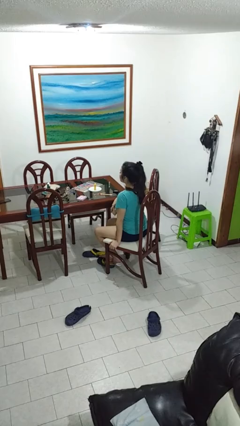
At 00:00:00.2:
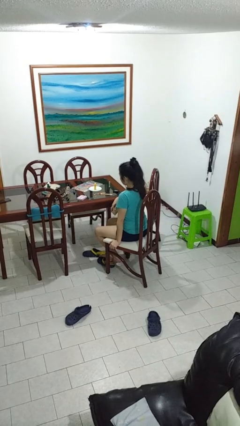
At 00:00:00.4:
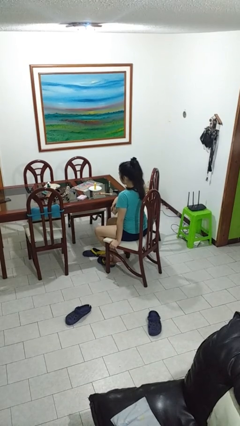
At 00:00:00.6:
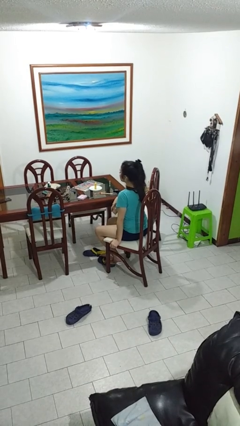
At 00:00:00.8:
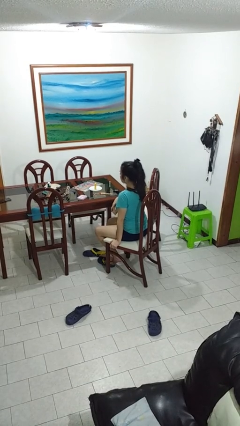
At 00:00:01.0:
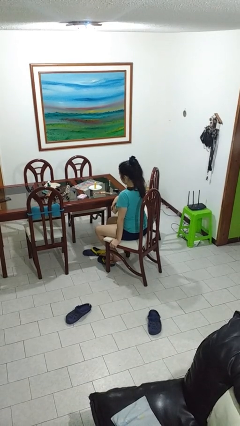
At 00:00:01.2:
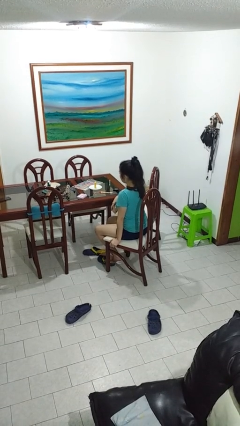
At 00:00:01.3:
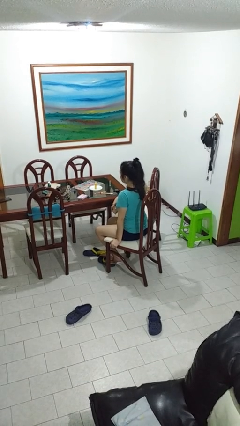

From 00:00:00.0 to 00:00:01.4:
person nods head

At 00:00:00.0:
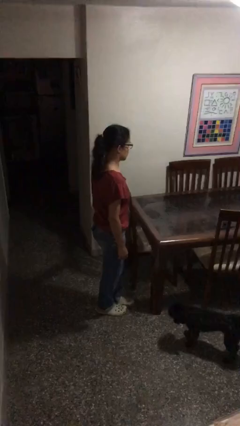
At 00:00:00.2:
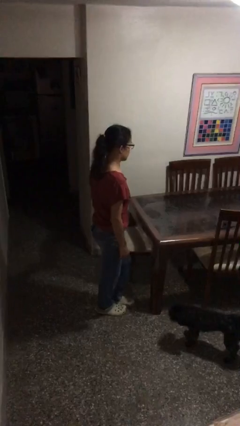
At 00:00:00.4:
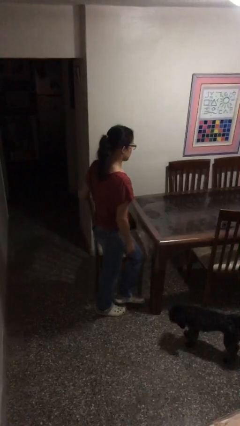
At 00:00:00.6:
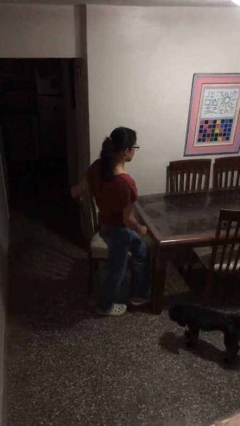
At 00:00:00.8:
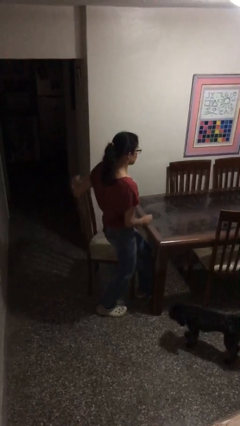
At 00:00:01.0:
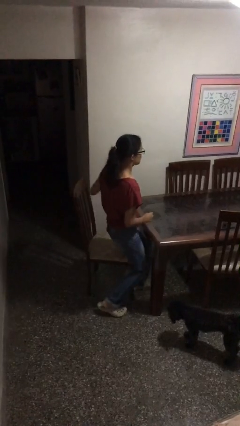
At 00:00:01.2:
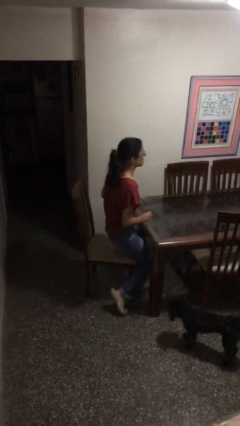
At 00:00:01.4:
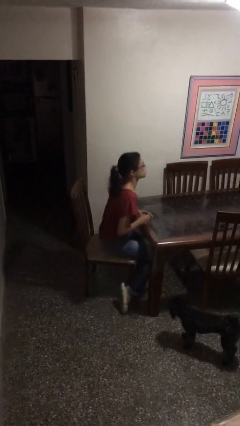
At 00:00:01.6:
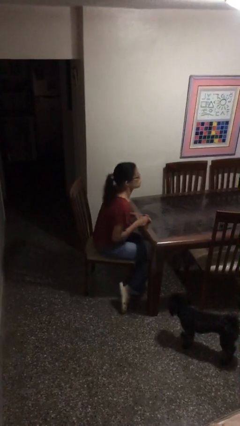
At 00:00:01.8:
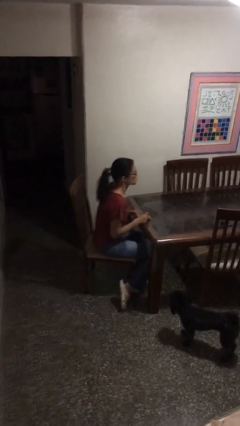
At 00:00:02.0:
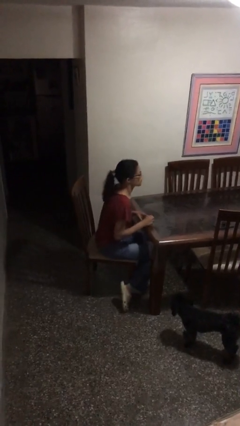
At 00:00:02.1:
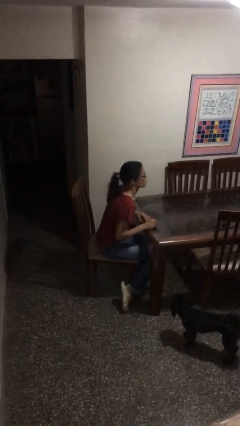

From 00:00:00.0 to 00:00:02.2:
person sits down

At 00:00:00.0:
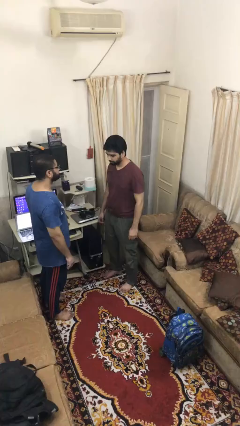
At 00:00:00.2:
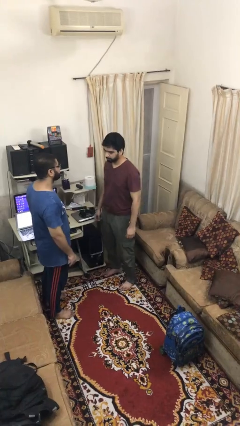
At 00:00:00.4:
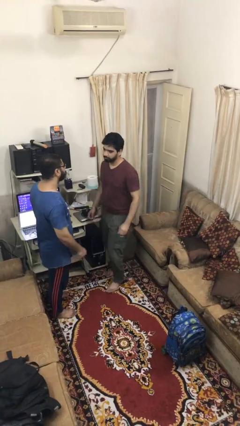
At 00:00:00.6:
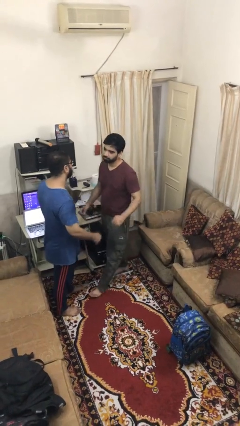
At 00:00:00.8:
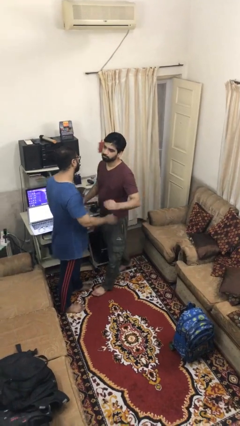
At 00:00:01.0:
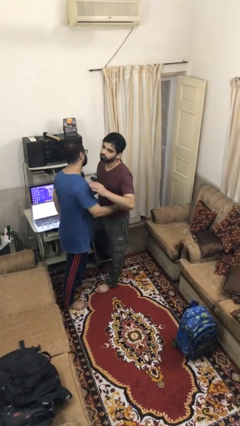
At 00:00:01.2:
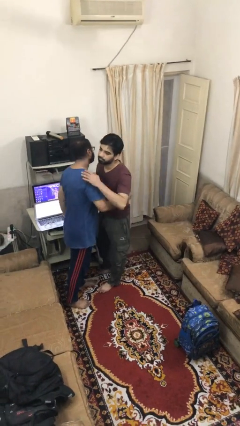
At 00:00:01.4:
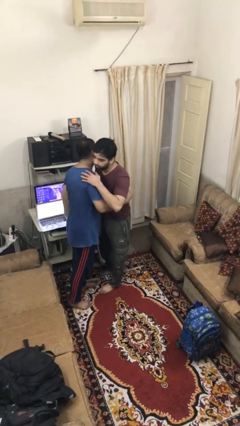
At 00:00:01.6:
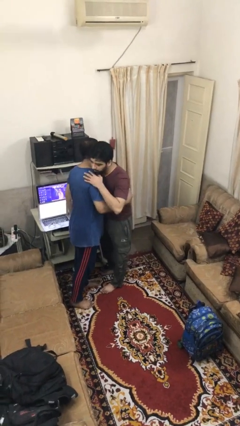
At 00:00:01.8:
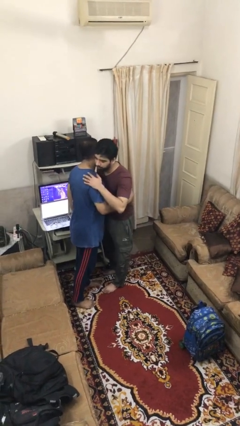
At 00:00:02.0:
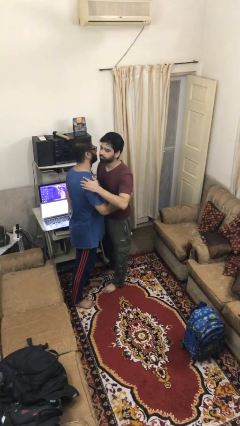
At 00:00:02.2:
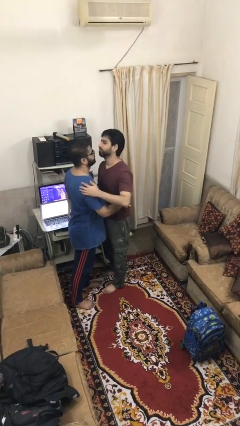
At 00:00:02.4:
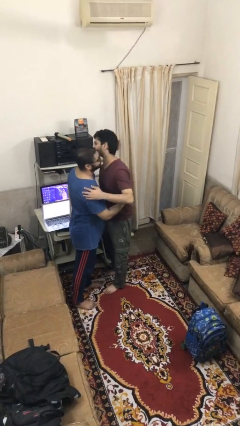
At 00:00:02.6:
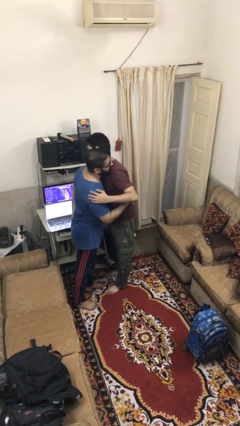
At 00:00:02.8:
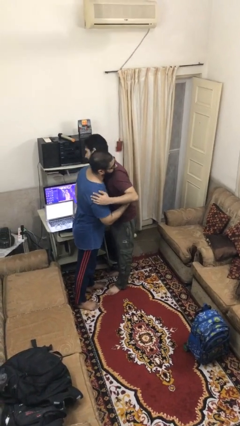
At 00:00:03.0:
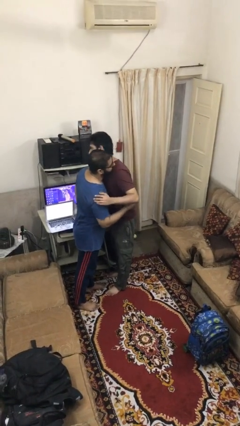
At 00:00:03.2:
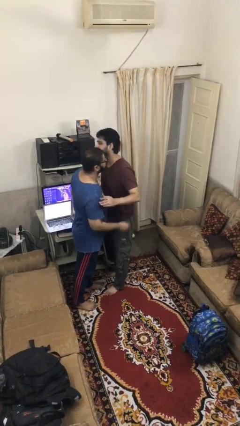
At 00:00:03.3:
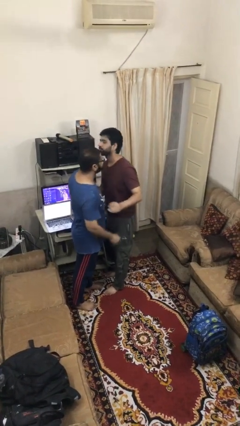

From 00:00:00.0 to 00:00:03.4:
person embraces person

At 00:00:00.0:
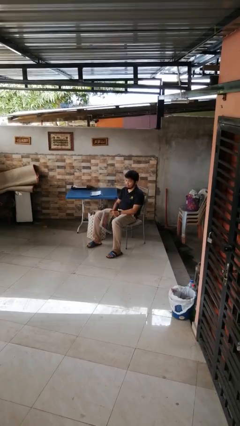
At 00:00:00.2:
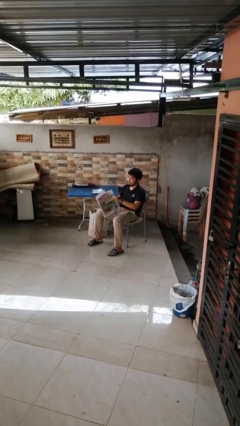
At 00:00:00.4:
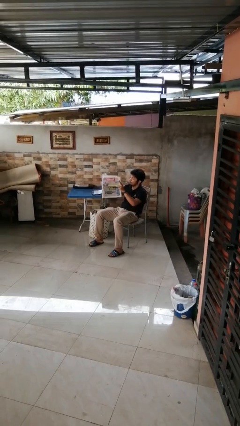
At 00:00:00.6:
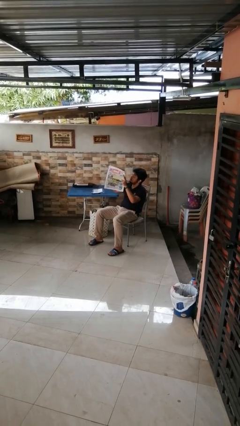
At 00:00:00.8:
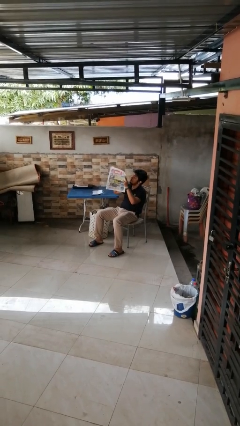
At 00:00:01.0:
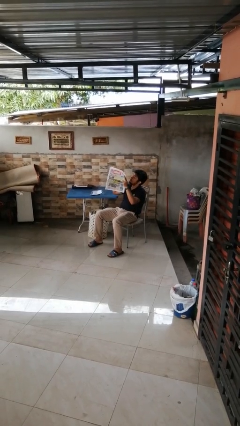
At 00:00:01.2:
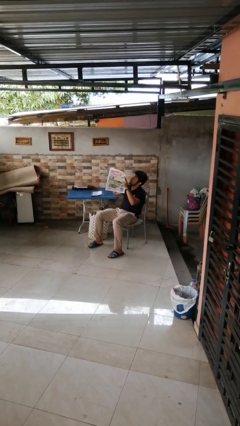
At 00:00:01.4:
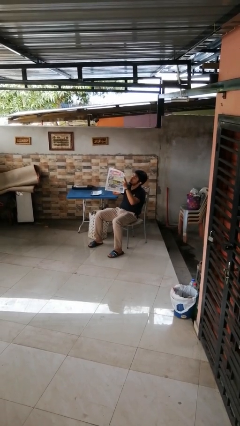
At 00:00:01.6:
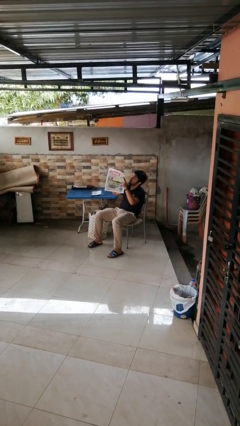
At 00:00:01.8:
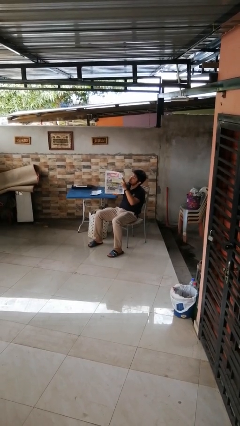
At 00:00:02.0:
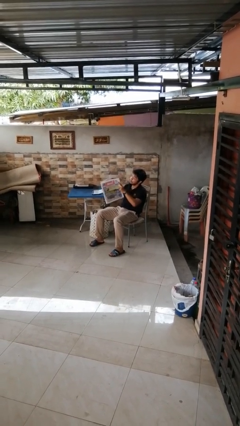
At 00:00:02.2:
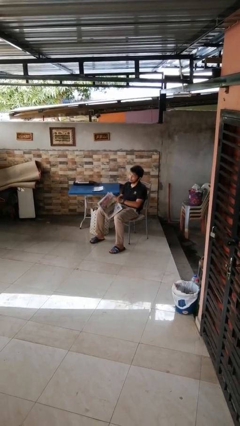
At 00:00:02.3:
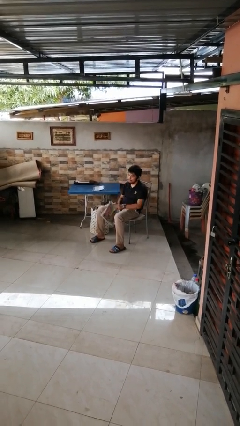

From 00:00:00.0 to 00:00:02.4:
person reads newspaper

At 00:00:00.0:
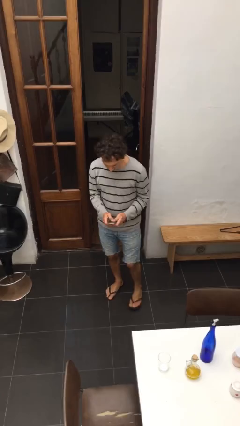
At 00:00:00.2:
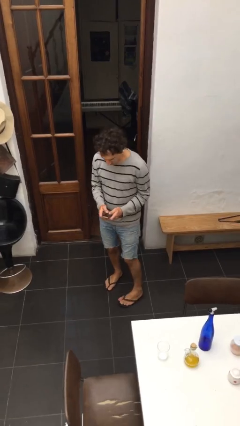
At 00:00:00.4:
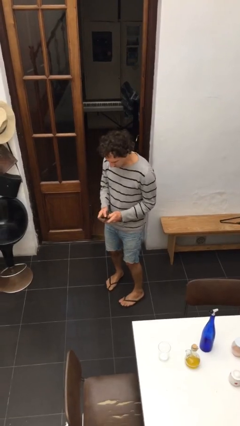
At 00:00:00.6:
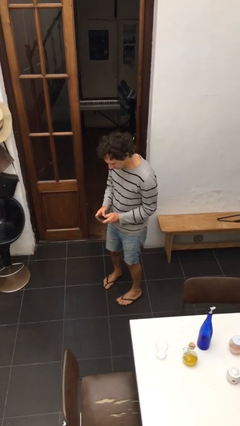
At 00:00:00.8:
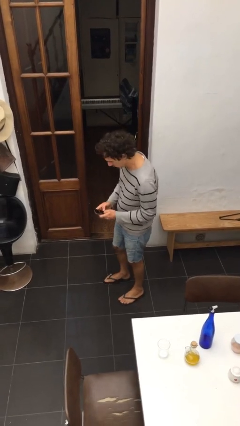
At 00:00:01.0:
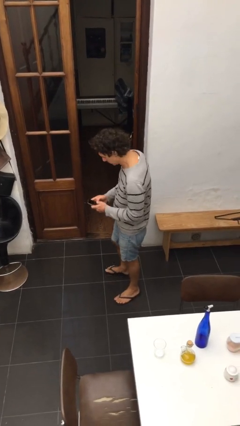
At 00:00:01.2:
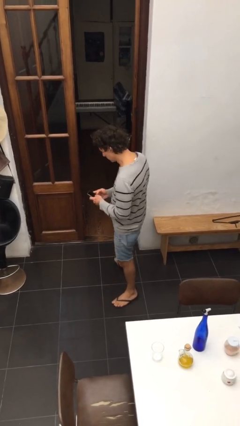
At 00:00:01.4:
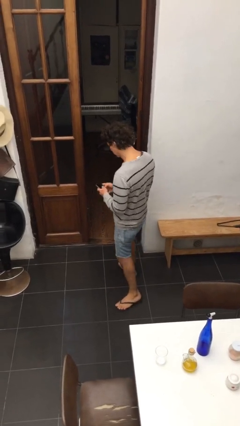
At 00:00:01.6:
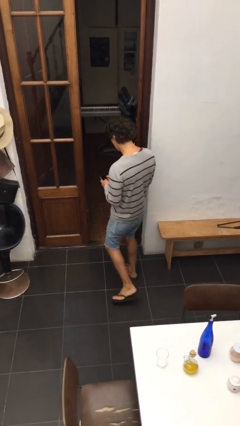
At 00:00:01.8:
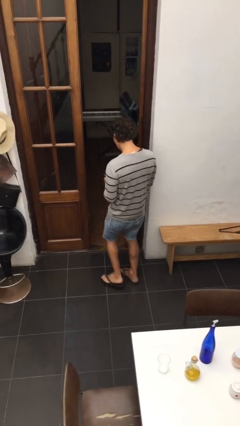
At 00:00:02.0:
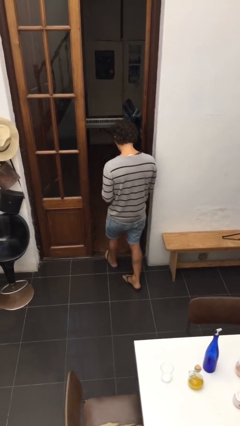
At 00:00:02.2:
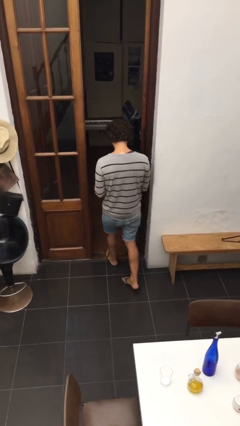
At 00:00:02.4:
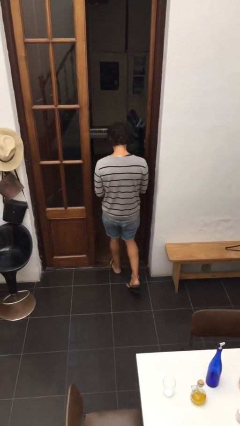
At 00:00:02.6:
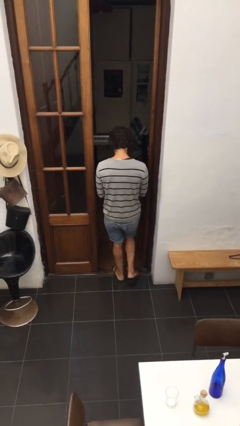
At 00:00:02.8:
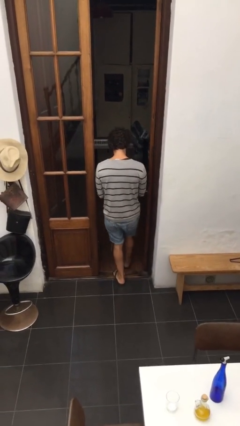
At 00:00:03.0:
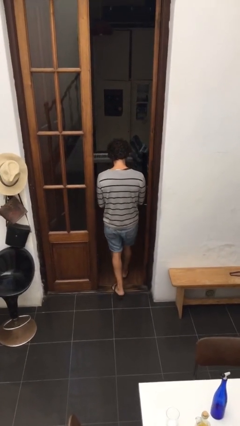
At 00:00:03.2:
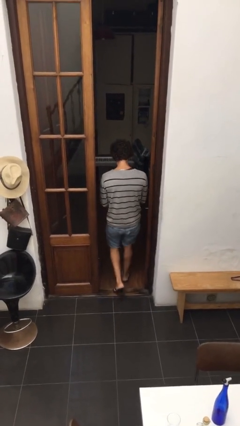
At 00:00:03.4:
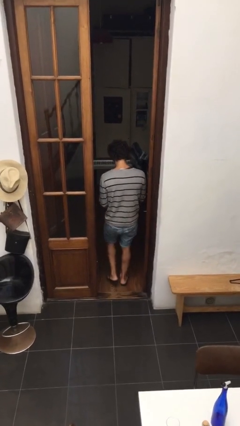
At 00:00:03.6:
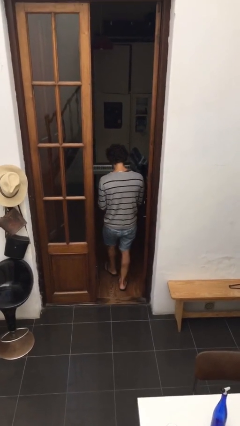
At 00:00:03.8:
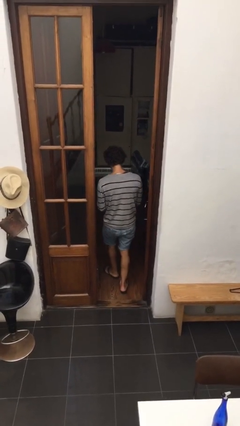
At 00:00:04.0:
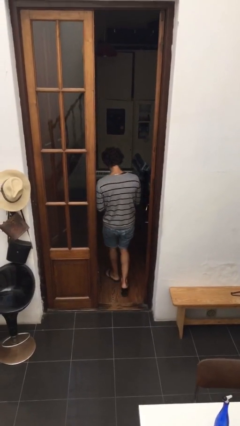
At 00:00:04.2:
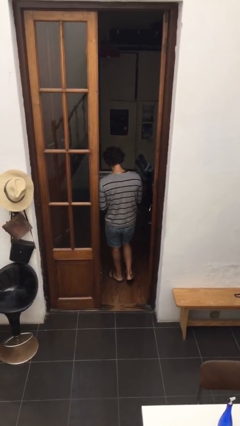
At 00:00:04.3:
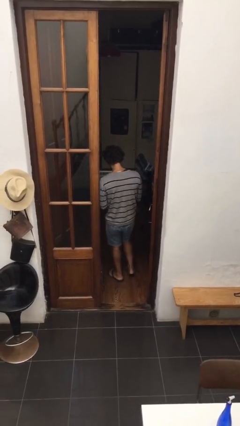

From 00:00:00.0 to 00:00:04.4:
person exits scene through structure

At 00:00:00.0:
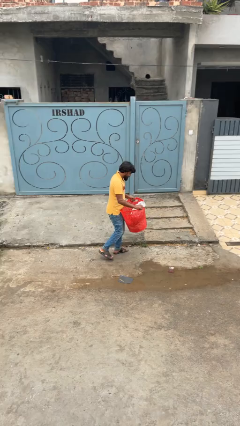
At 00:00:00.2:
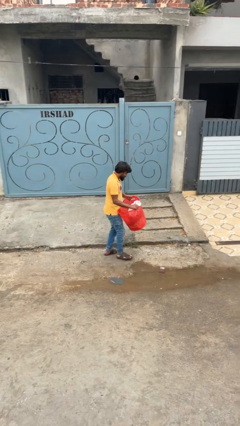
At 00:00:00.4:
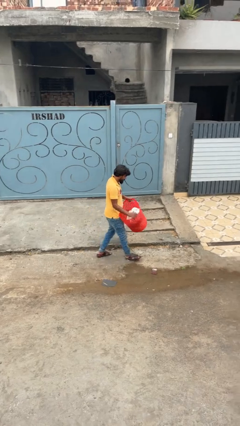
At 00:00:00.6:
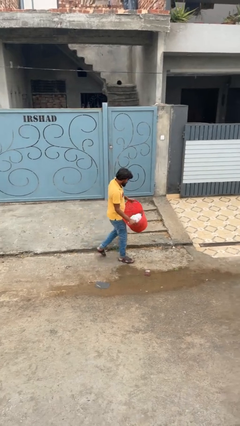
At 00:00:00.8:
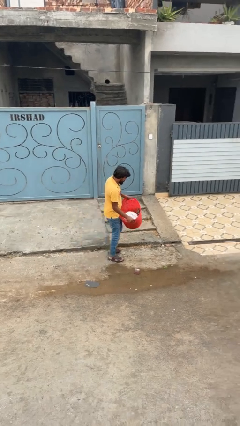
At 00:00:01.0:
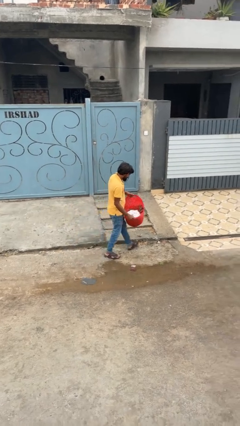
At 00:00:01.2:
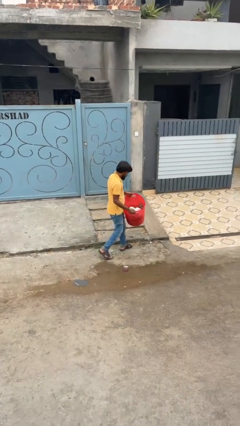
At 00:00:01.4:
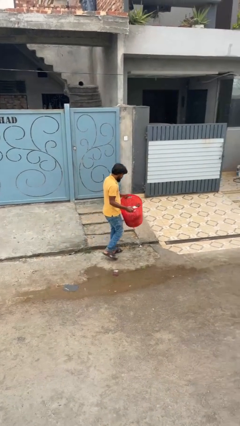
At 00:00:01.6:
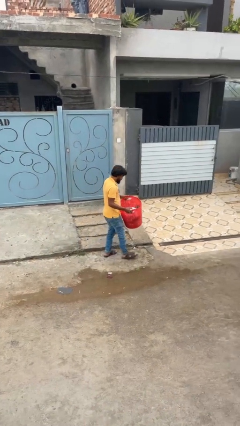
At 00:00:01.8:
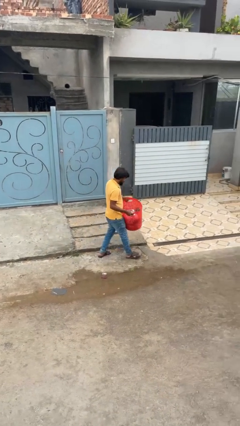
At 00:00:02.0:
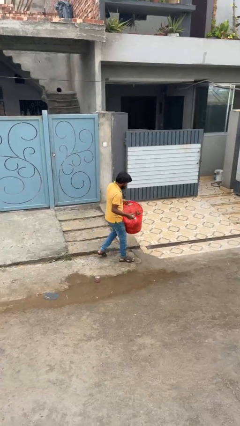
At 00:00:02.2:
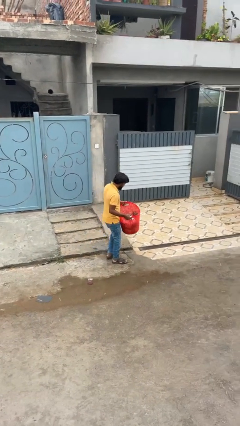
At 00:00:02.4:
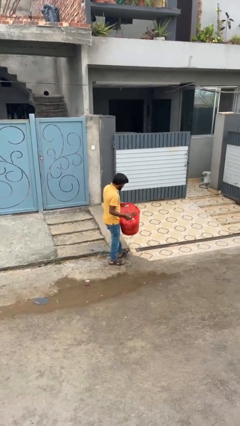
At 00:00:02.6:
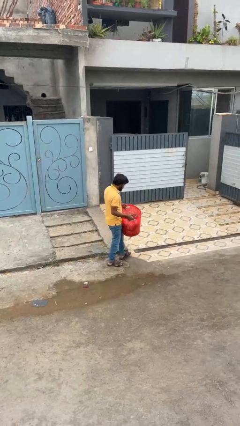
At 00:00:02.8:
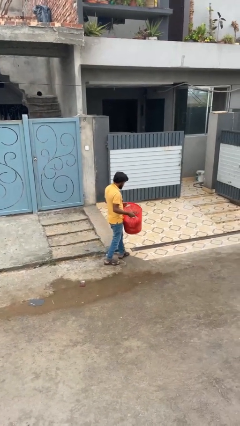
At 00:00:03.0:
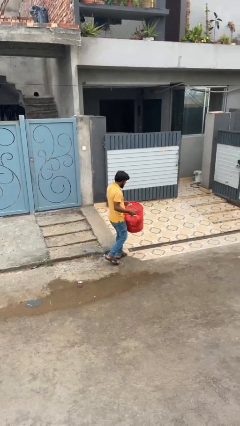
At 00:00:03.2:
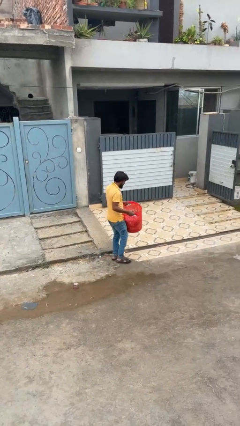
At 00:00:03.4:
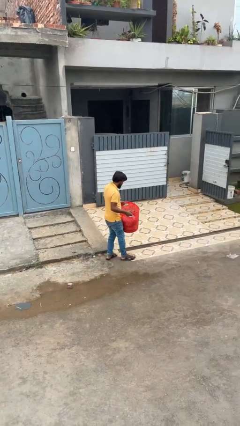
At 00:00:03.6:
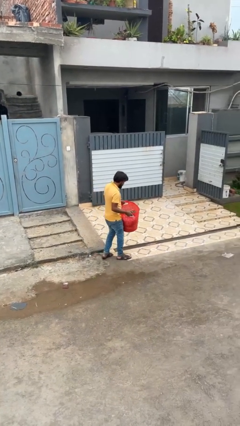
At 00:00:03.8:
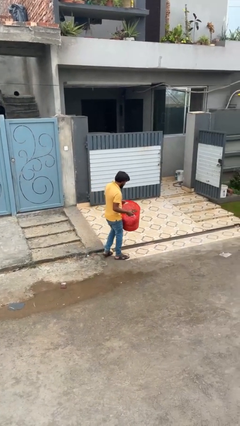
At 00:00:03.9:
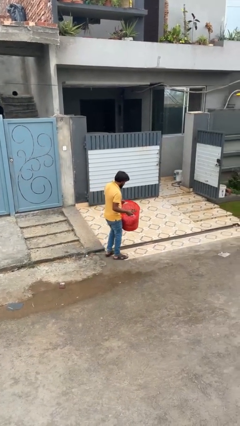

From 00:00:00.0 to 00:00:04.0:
person carries laundry basket
